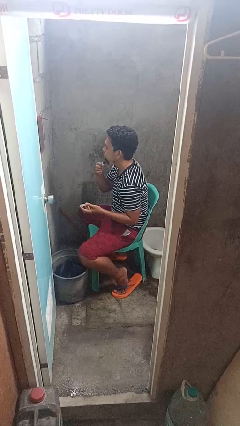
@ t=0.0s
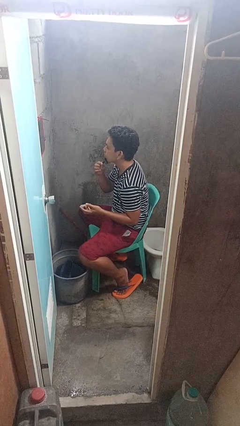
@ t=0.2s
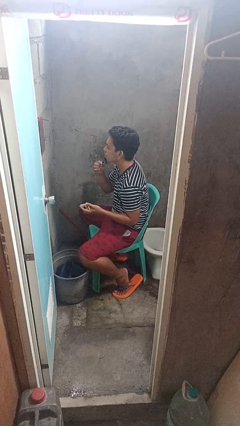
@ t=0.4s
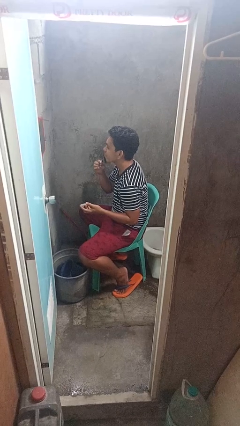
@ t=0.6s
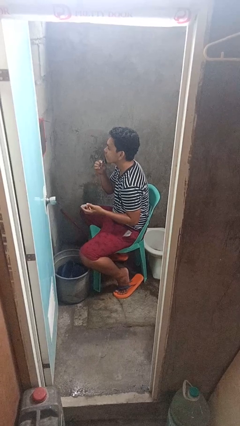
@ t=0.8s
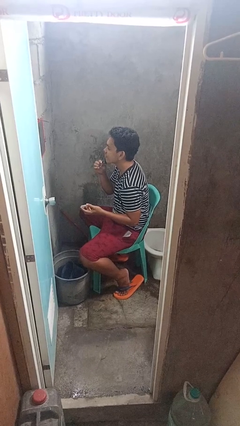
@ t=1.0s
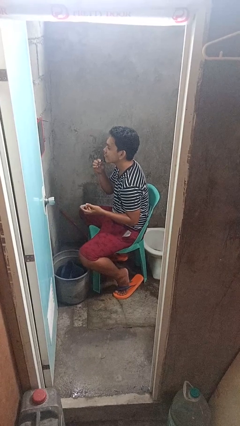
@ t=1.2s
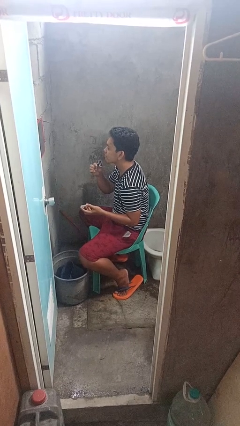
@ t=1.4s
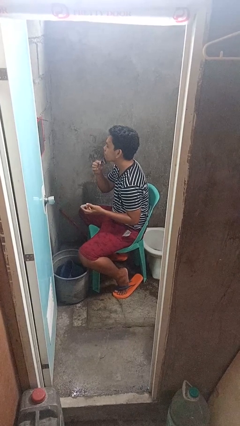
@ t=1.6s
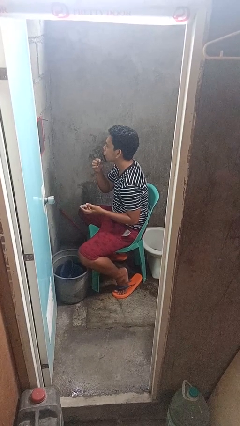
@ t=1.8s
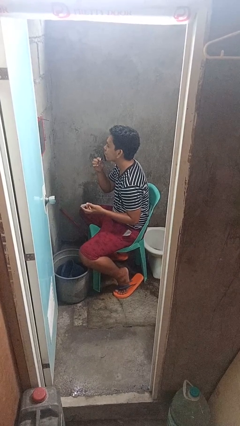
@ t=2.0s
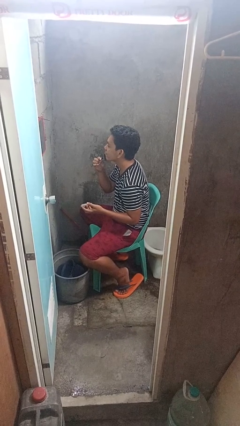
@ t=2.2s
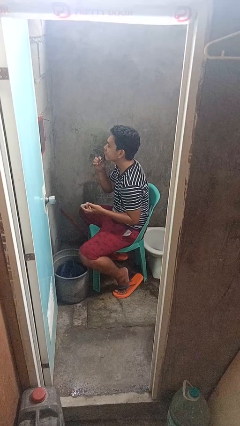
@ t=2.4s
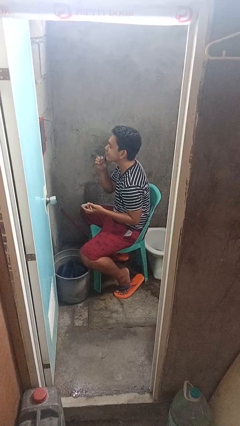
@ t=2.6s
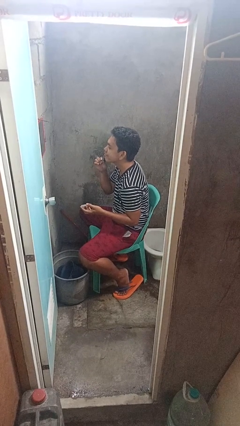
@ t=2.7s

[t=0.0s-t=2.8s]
person shaves face

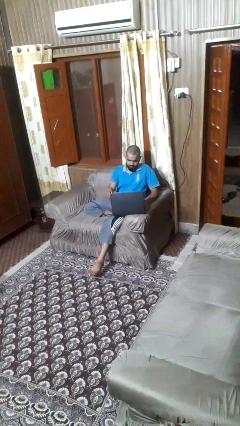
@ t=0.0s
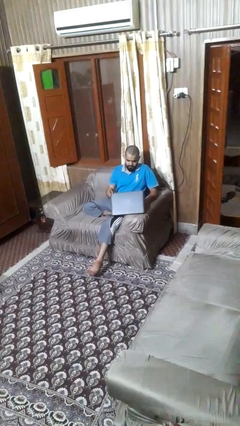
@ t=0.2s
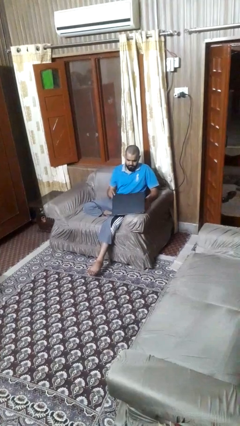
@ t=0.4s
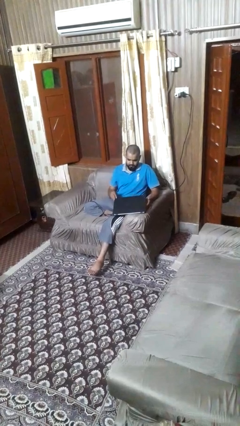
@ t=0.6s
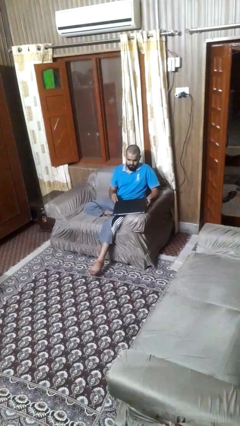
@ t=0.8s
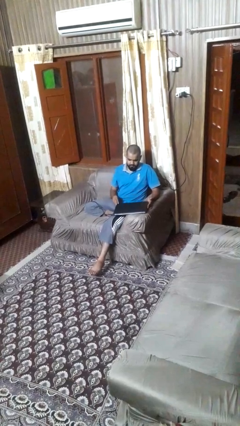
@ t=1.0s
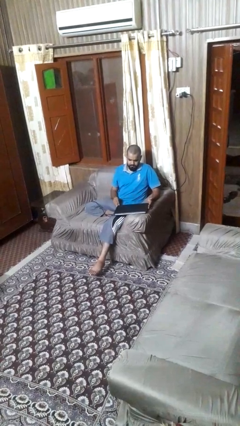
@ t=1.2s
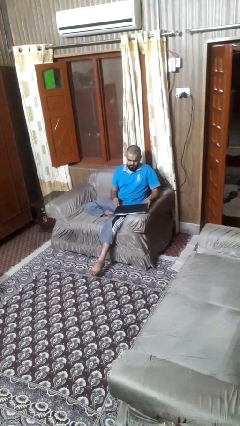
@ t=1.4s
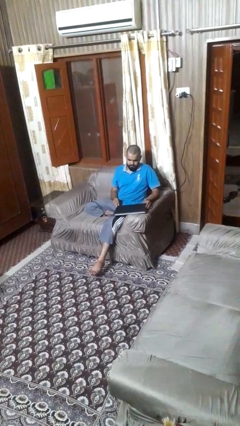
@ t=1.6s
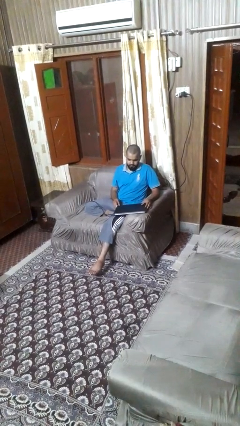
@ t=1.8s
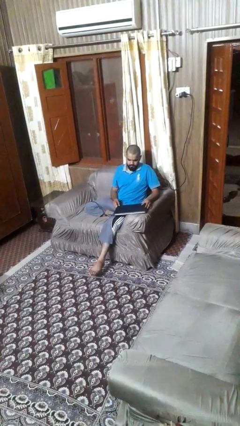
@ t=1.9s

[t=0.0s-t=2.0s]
person closes laptop

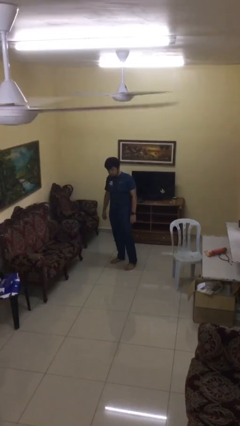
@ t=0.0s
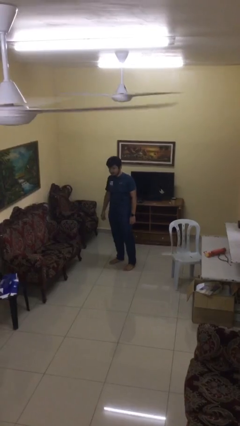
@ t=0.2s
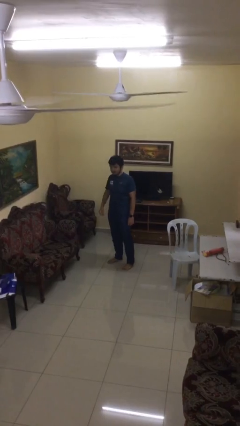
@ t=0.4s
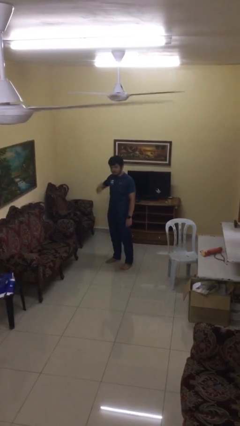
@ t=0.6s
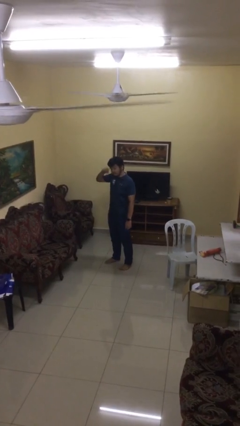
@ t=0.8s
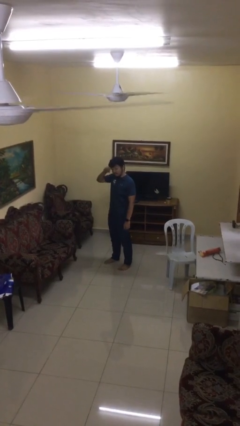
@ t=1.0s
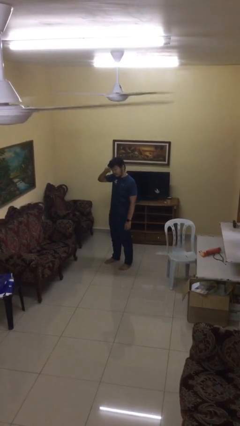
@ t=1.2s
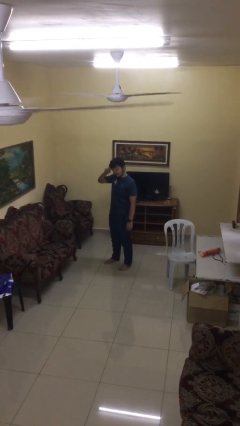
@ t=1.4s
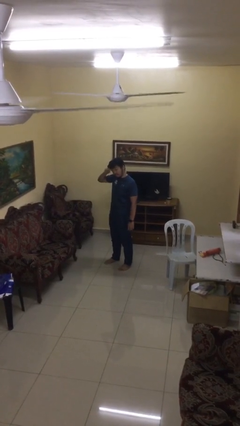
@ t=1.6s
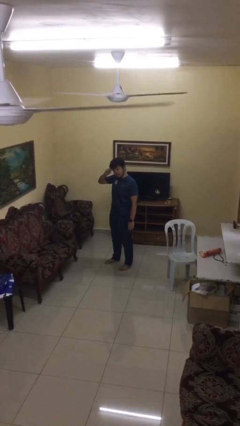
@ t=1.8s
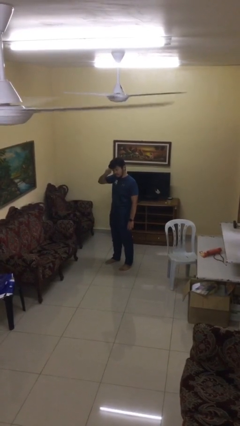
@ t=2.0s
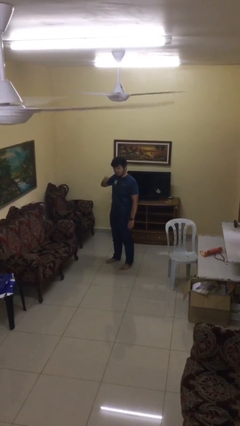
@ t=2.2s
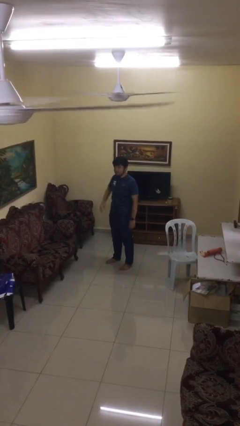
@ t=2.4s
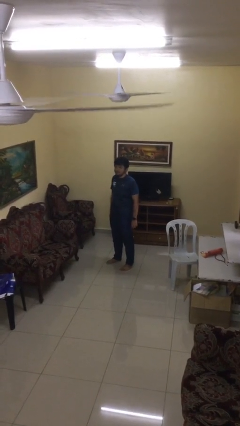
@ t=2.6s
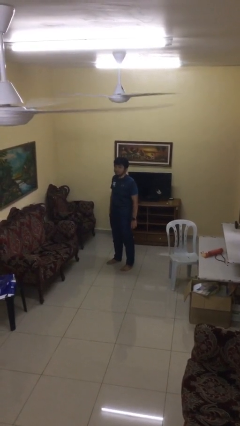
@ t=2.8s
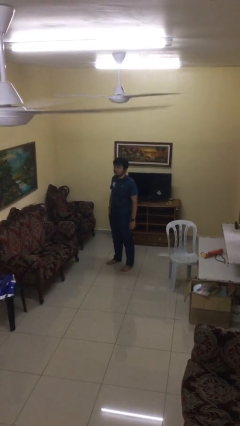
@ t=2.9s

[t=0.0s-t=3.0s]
person scratches face

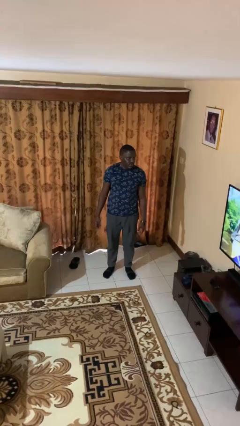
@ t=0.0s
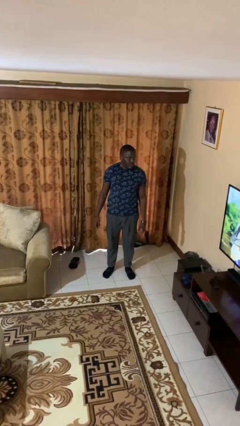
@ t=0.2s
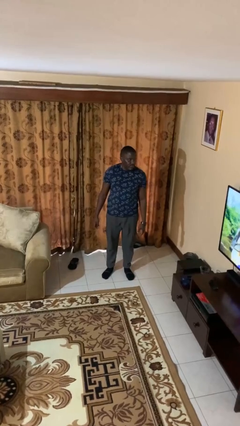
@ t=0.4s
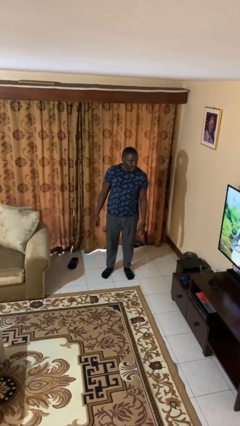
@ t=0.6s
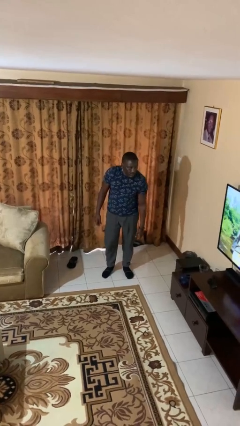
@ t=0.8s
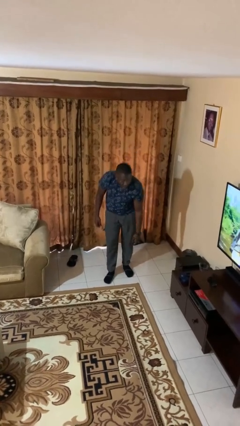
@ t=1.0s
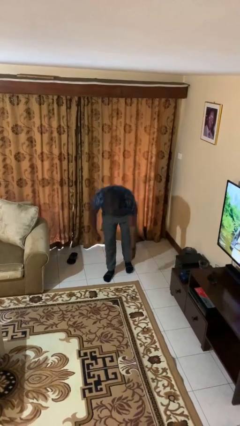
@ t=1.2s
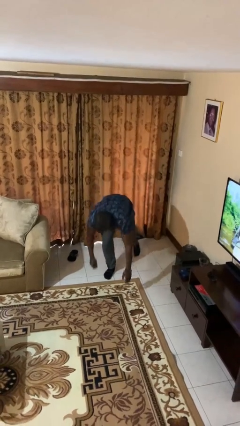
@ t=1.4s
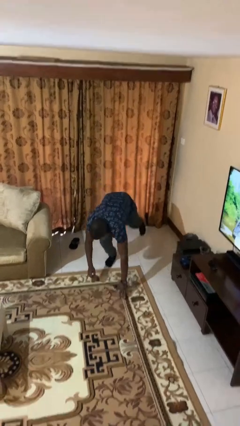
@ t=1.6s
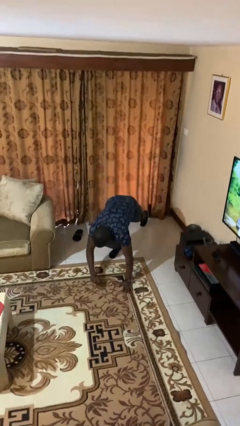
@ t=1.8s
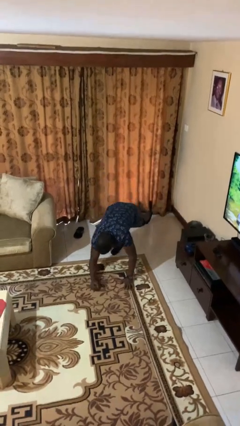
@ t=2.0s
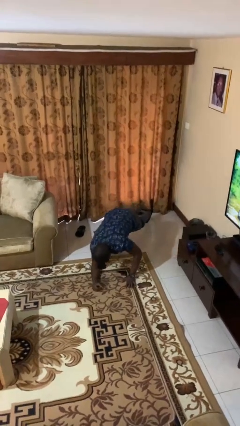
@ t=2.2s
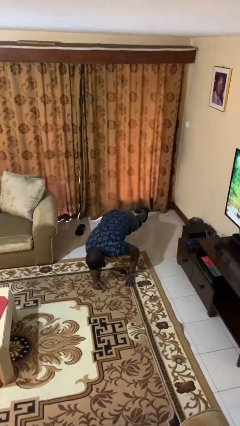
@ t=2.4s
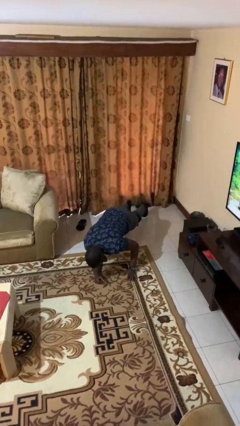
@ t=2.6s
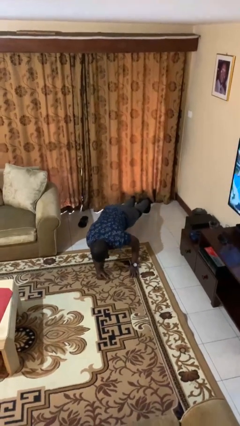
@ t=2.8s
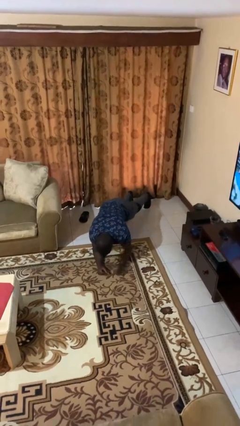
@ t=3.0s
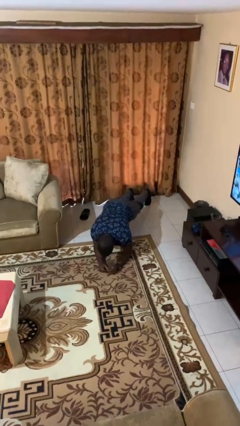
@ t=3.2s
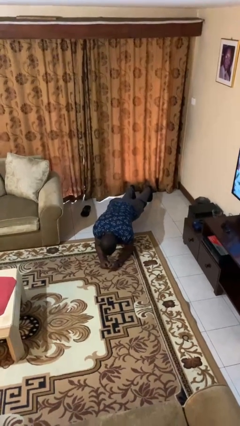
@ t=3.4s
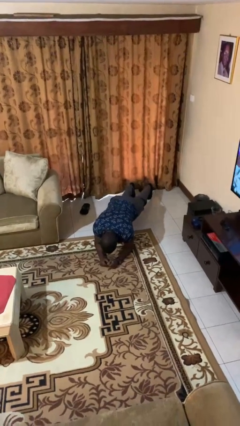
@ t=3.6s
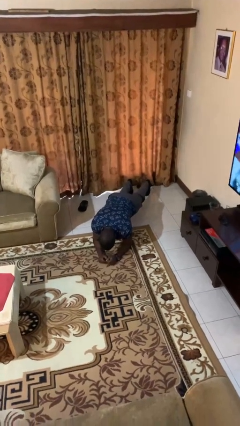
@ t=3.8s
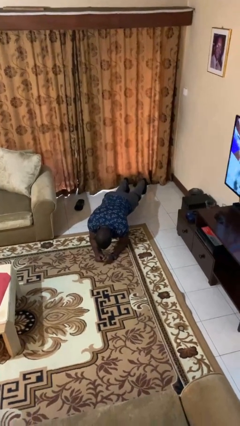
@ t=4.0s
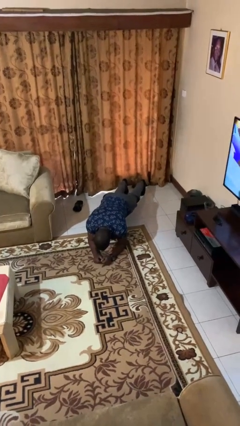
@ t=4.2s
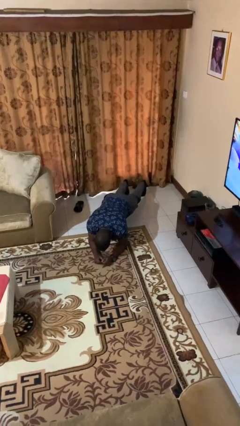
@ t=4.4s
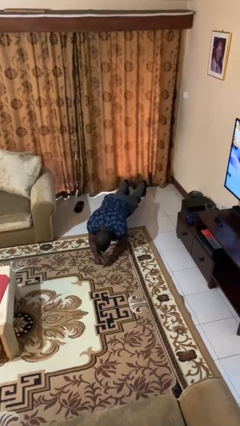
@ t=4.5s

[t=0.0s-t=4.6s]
person exercises with plank

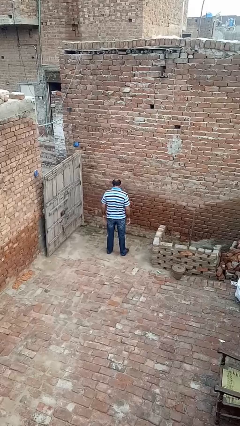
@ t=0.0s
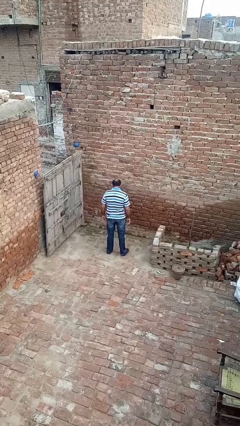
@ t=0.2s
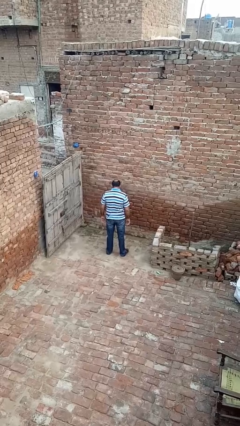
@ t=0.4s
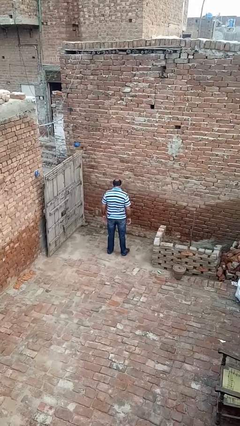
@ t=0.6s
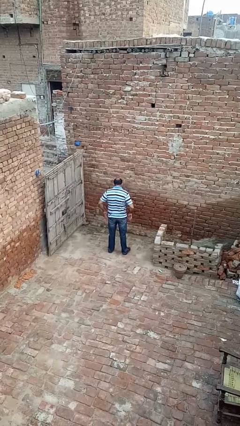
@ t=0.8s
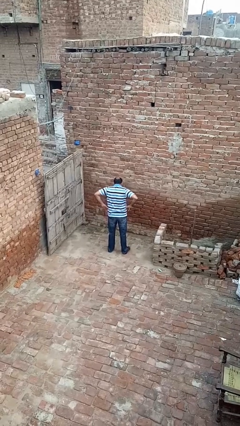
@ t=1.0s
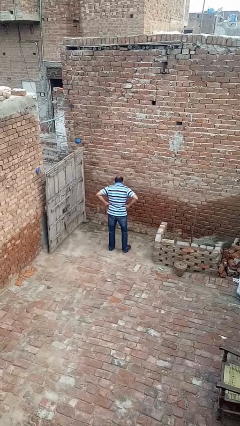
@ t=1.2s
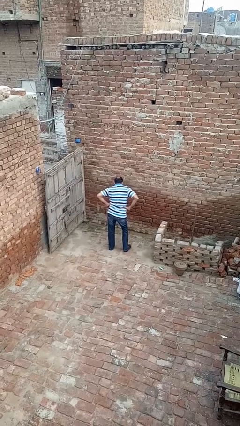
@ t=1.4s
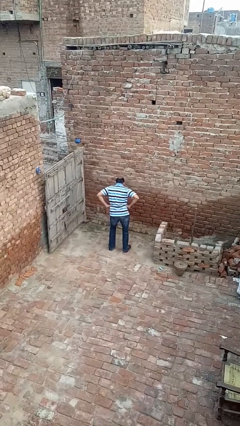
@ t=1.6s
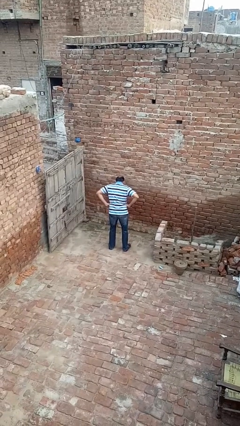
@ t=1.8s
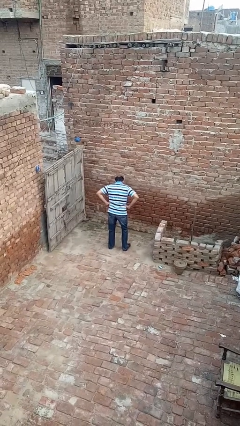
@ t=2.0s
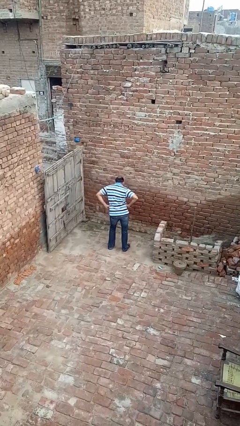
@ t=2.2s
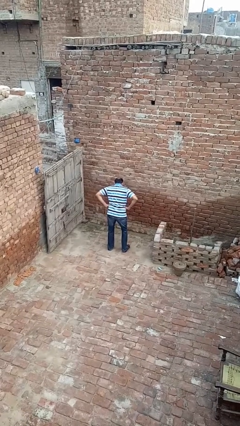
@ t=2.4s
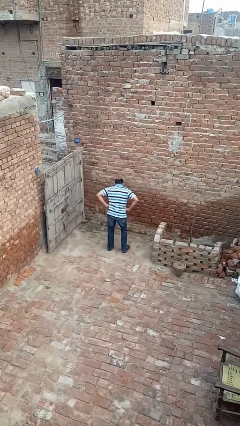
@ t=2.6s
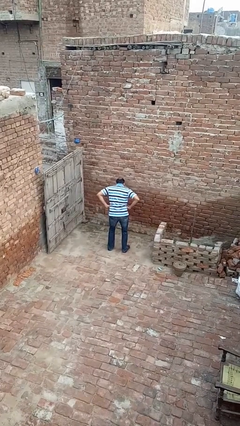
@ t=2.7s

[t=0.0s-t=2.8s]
person wiggles hips

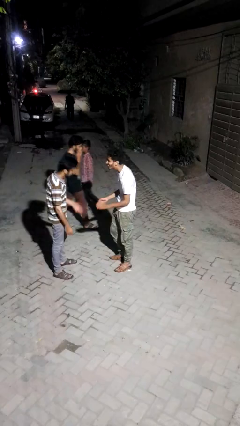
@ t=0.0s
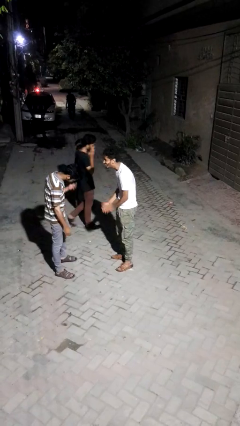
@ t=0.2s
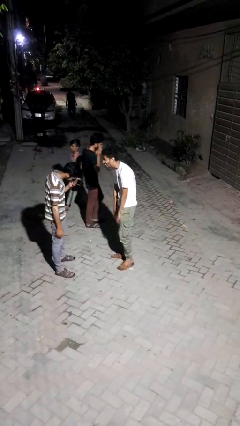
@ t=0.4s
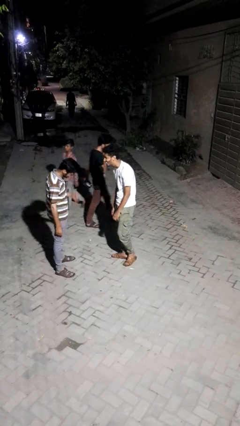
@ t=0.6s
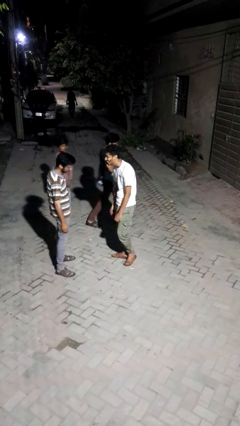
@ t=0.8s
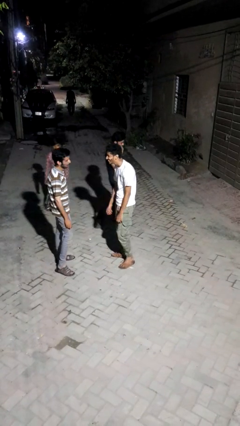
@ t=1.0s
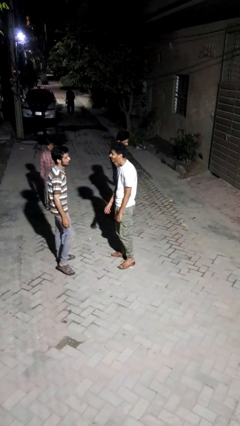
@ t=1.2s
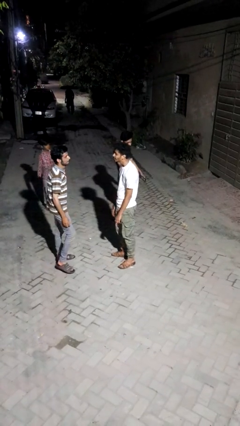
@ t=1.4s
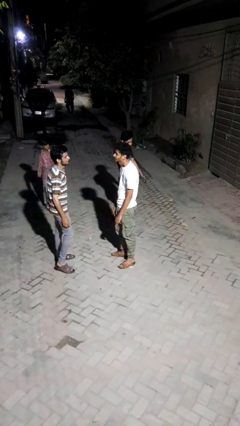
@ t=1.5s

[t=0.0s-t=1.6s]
person laughs with person

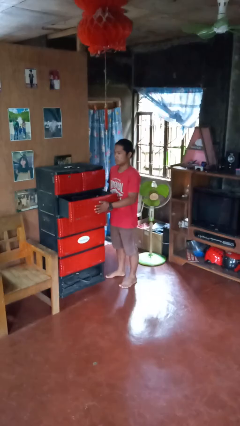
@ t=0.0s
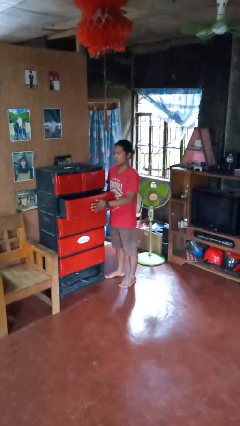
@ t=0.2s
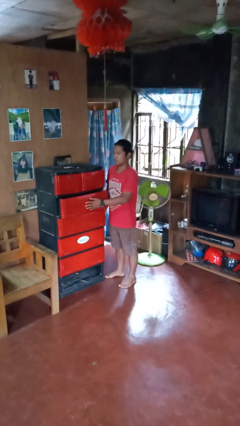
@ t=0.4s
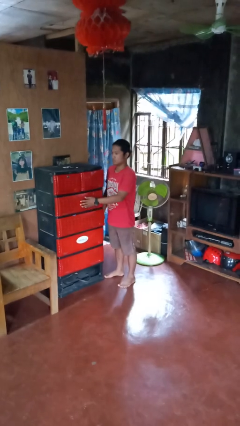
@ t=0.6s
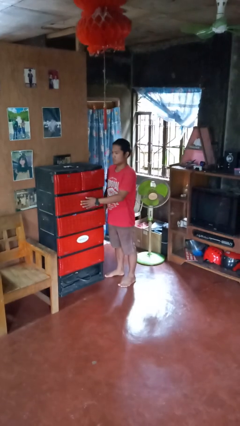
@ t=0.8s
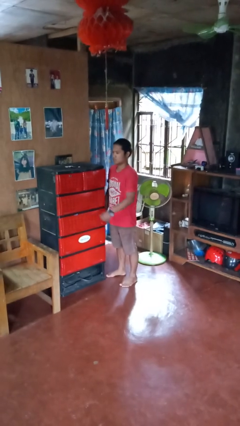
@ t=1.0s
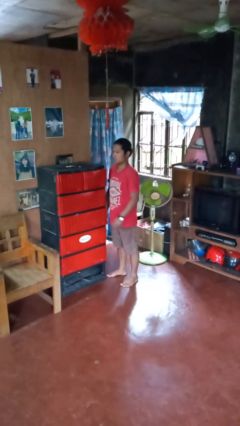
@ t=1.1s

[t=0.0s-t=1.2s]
person closes dresser drawer
